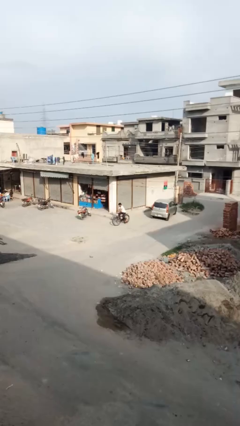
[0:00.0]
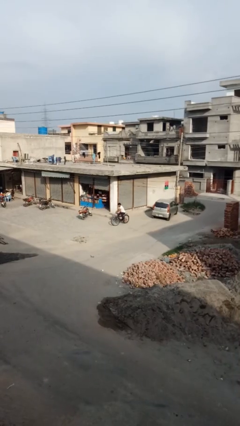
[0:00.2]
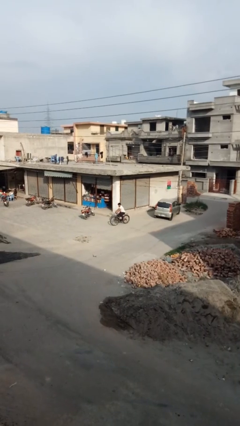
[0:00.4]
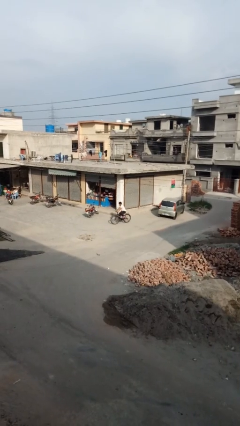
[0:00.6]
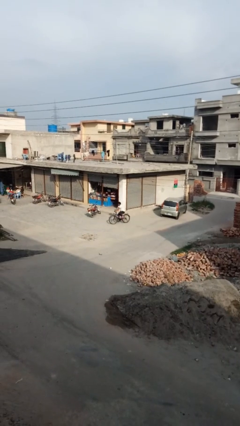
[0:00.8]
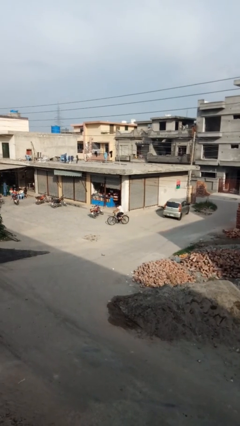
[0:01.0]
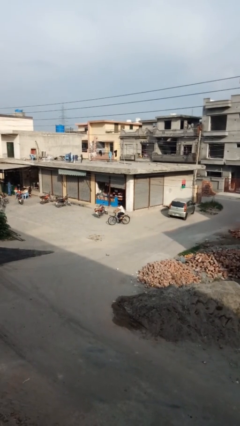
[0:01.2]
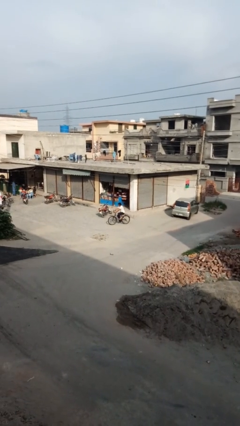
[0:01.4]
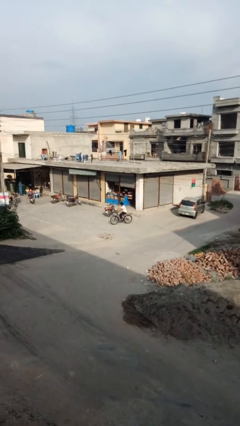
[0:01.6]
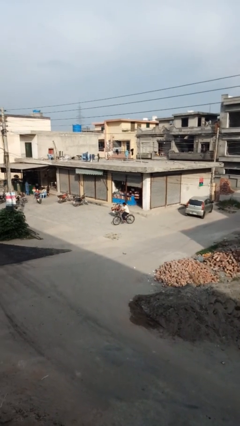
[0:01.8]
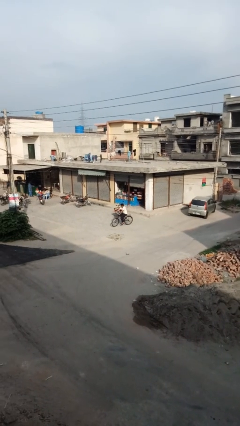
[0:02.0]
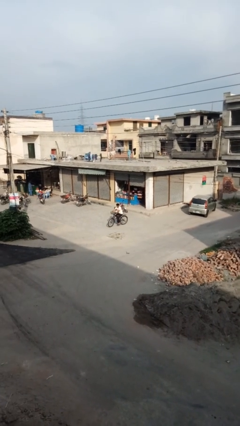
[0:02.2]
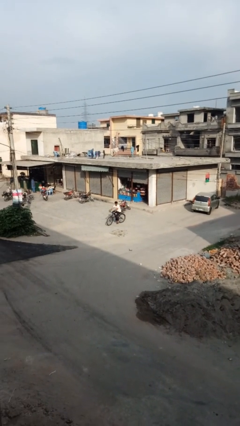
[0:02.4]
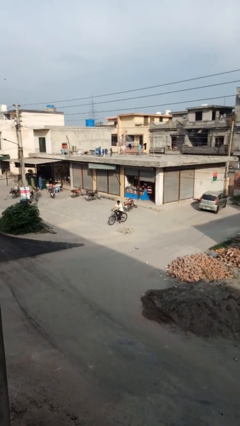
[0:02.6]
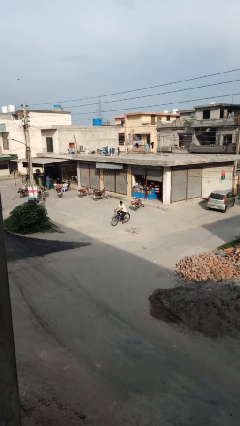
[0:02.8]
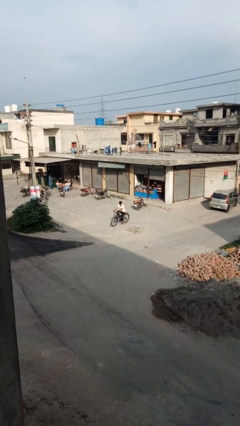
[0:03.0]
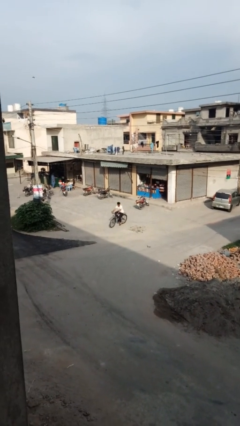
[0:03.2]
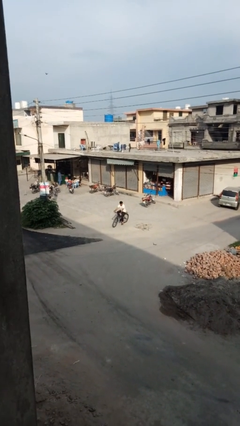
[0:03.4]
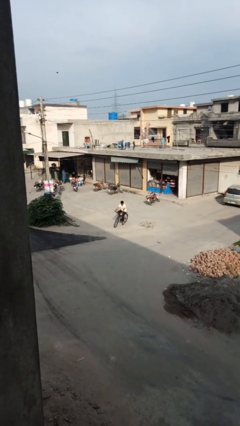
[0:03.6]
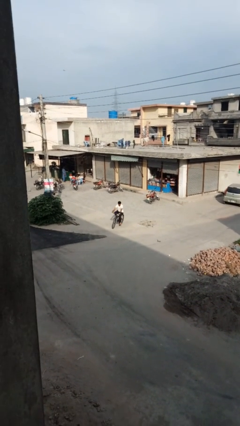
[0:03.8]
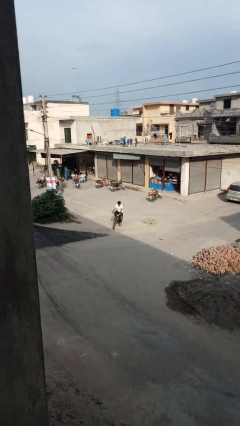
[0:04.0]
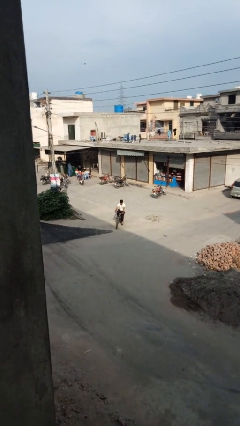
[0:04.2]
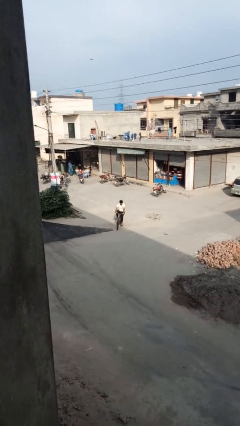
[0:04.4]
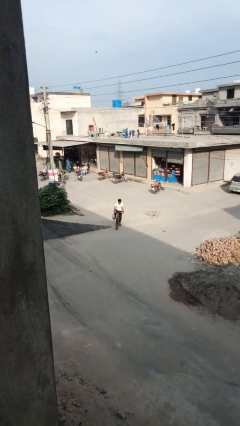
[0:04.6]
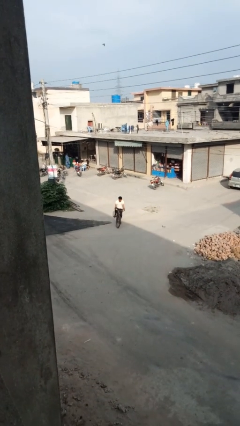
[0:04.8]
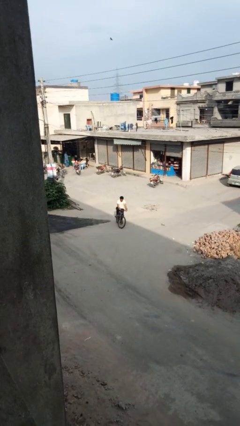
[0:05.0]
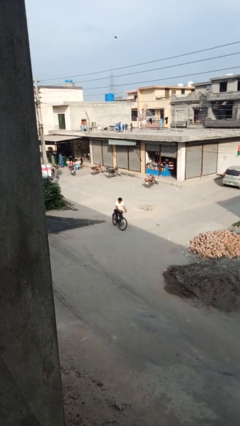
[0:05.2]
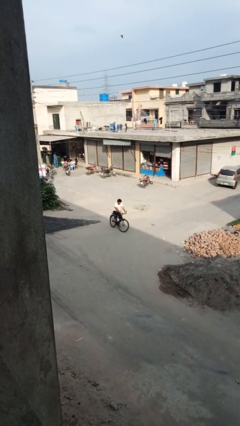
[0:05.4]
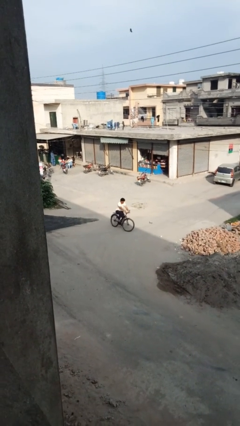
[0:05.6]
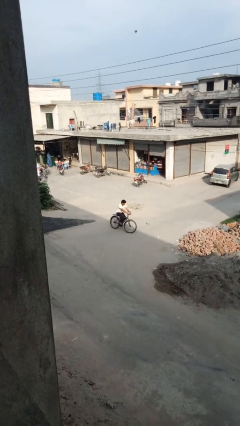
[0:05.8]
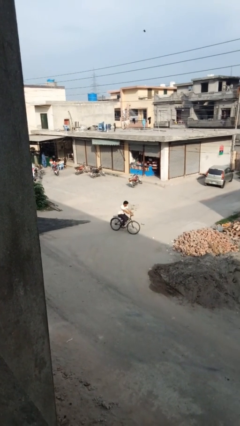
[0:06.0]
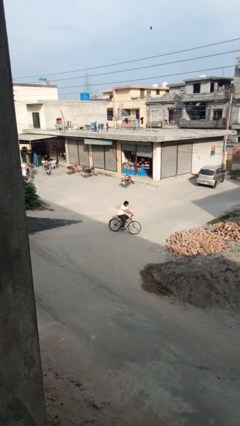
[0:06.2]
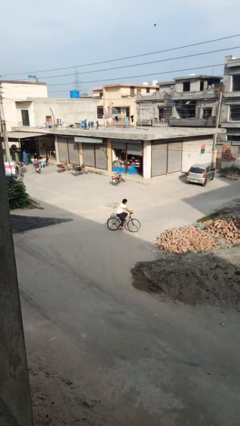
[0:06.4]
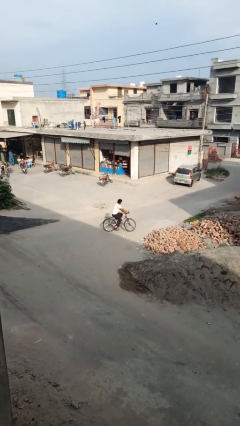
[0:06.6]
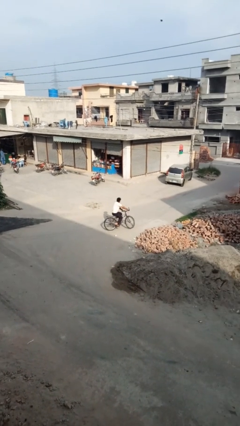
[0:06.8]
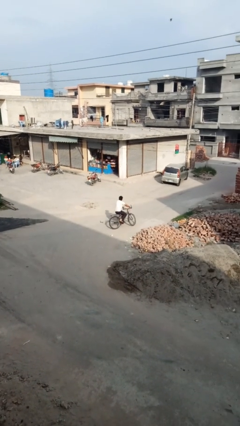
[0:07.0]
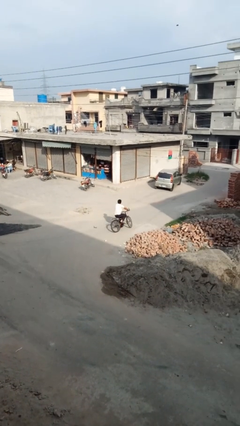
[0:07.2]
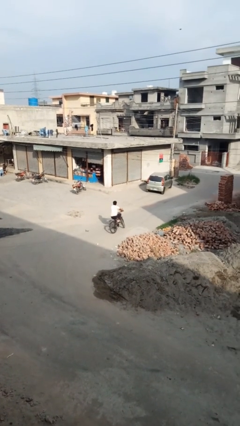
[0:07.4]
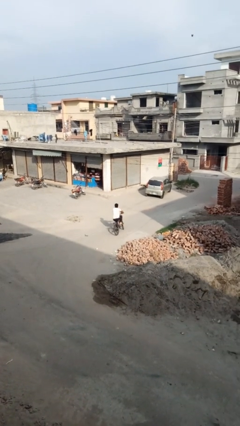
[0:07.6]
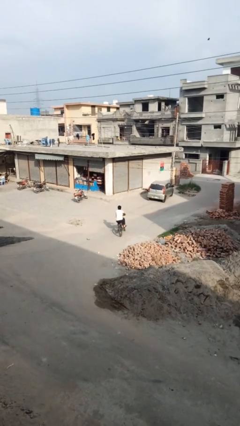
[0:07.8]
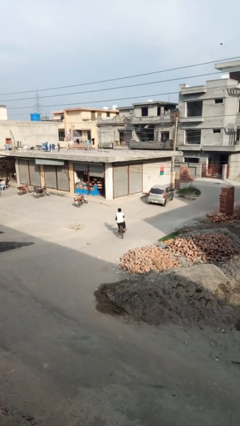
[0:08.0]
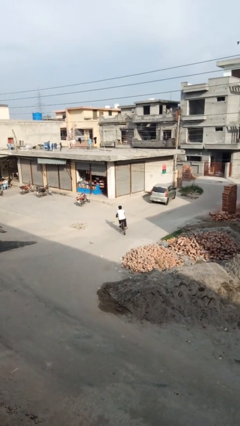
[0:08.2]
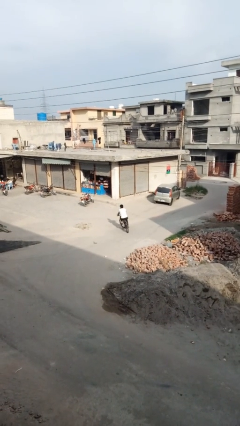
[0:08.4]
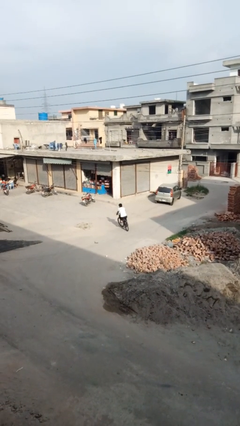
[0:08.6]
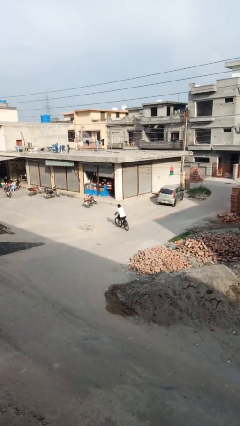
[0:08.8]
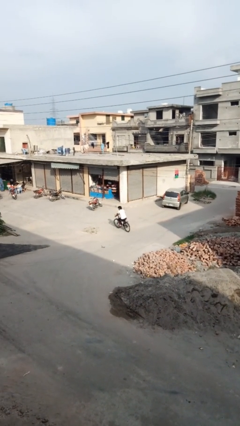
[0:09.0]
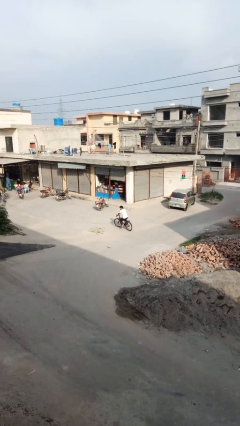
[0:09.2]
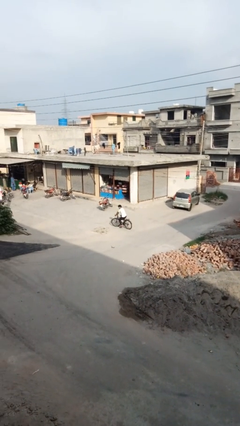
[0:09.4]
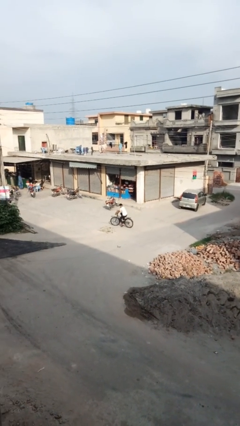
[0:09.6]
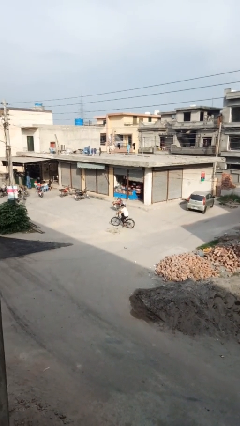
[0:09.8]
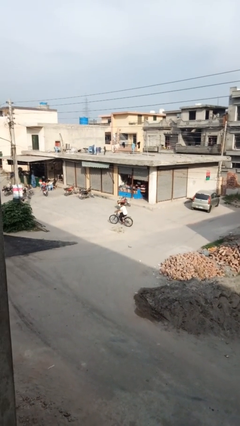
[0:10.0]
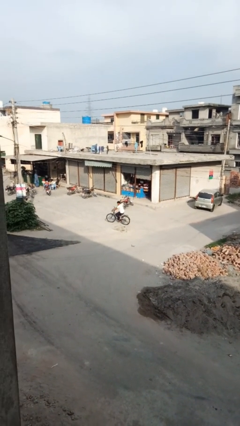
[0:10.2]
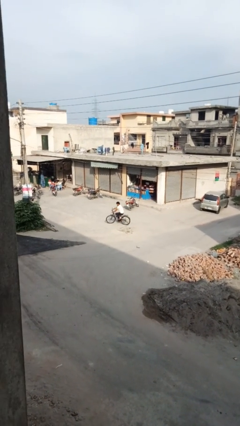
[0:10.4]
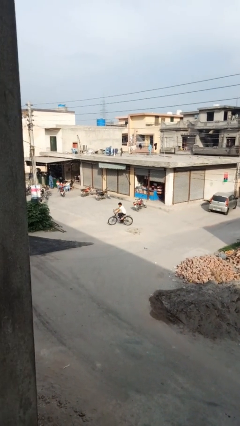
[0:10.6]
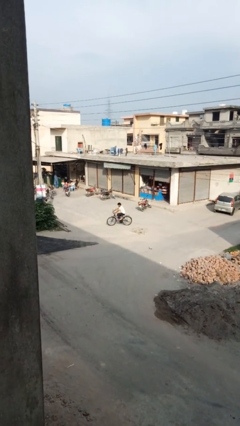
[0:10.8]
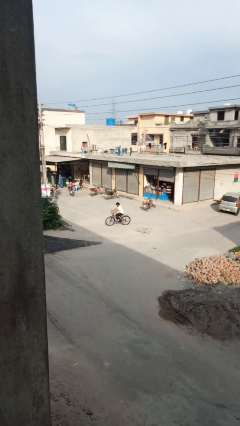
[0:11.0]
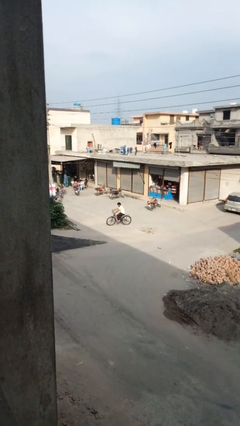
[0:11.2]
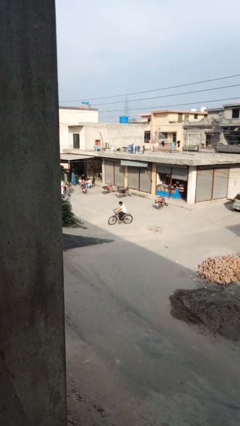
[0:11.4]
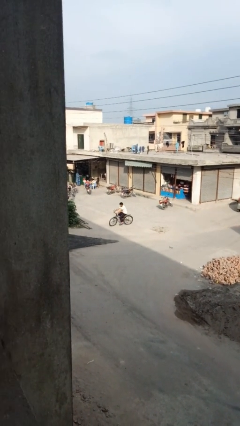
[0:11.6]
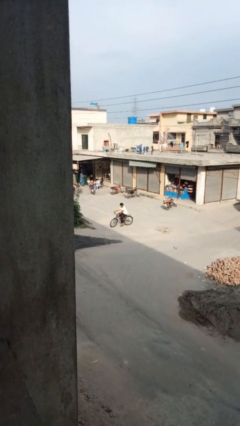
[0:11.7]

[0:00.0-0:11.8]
person rides bicycle

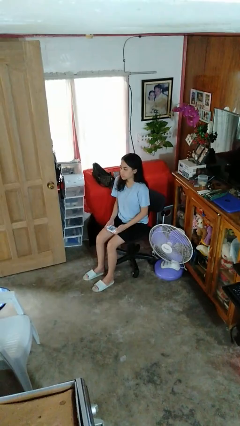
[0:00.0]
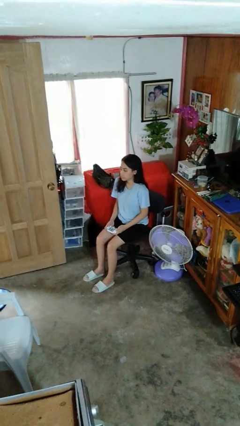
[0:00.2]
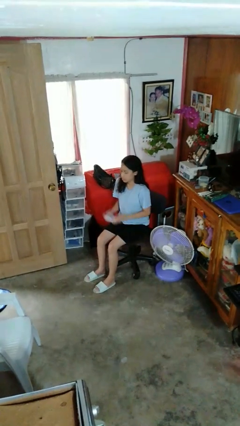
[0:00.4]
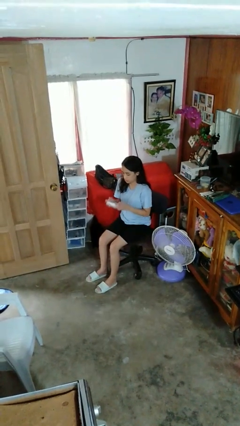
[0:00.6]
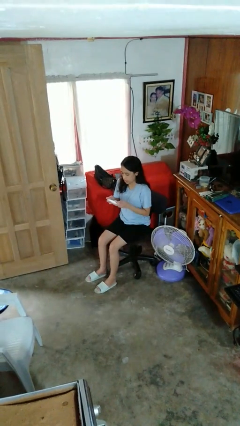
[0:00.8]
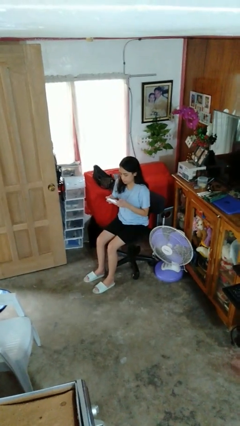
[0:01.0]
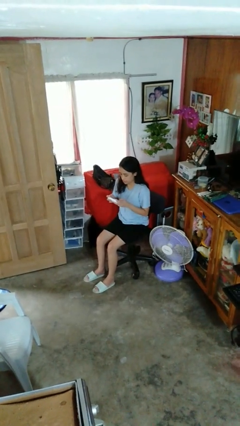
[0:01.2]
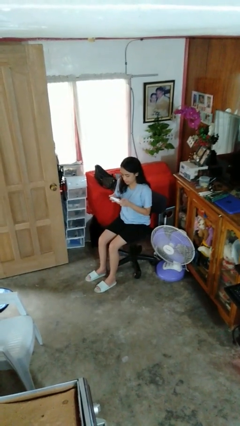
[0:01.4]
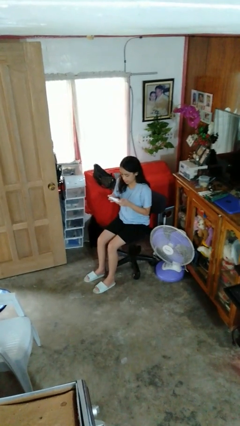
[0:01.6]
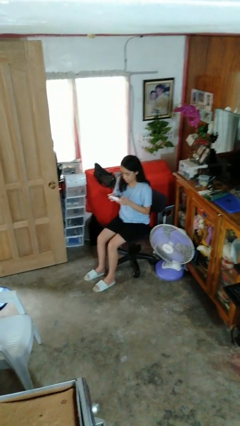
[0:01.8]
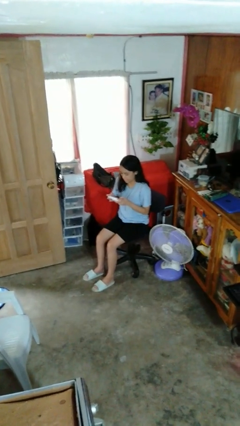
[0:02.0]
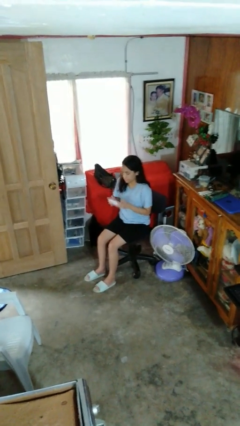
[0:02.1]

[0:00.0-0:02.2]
person interacts with handheld game

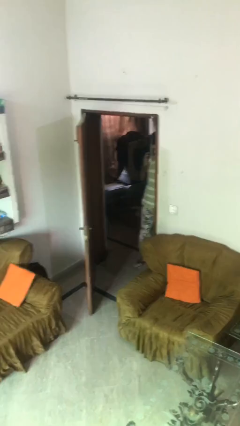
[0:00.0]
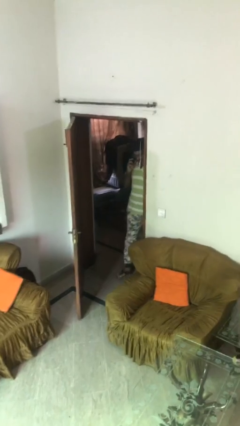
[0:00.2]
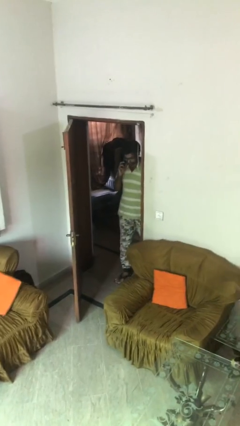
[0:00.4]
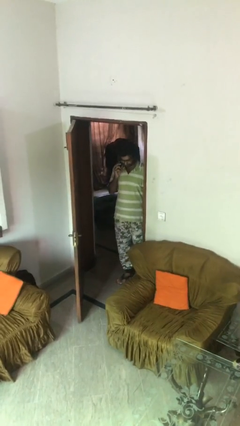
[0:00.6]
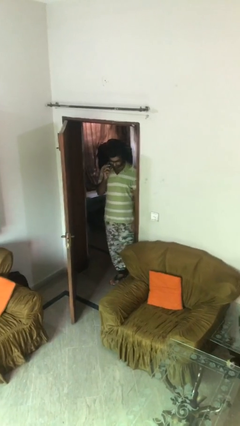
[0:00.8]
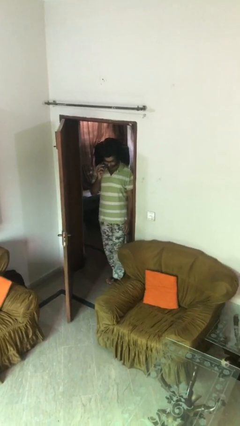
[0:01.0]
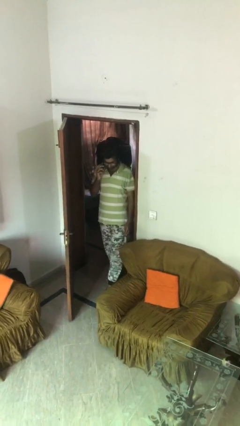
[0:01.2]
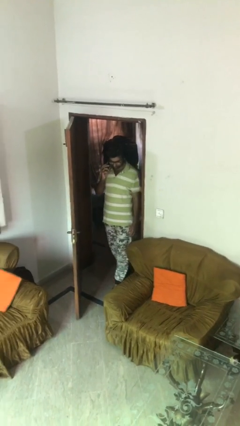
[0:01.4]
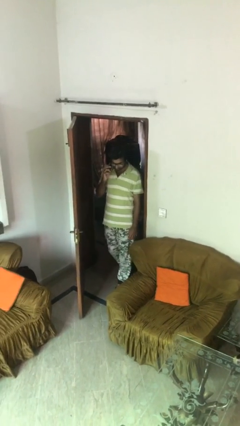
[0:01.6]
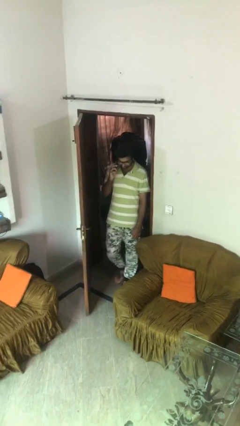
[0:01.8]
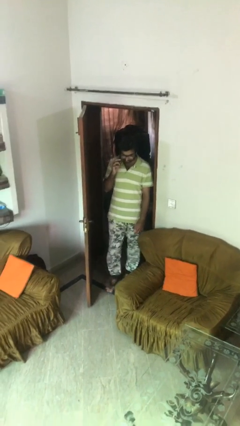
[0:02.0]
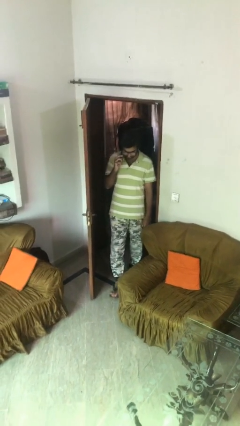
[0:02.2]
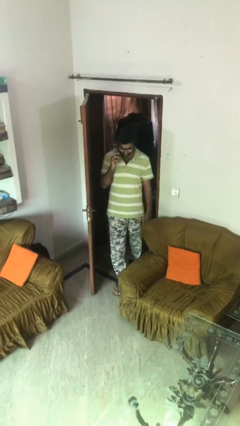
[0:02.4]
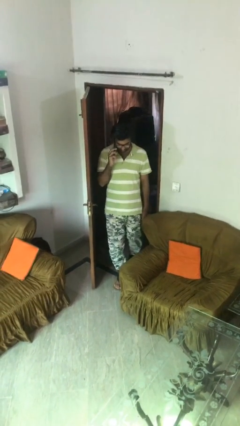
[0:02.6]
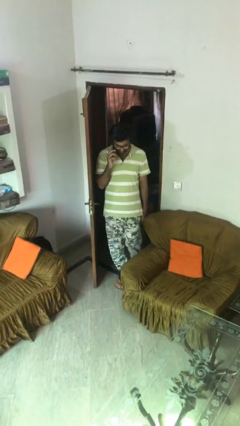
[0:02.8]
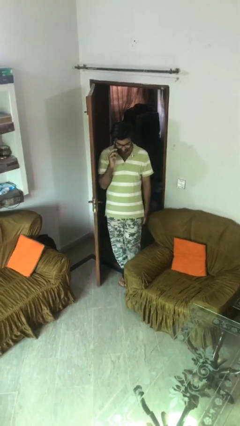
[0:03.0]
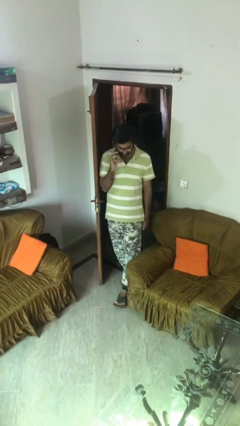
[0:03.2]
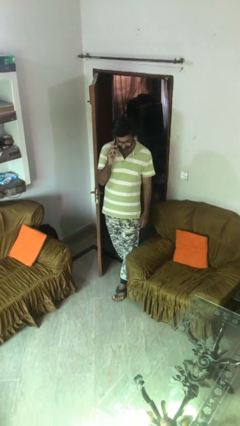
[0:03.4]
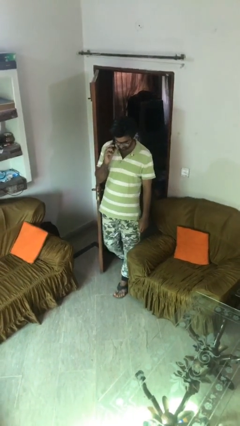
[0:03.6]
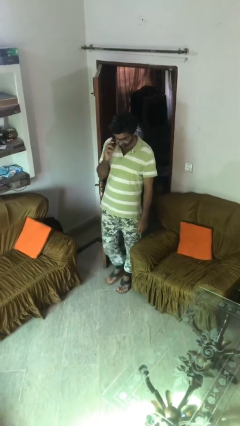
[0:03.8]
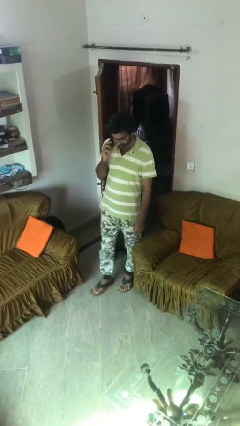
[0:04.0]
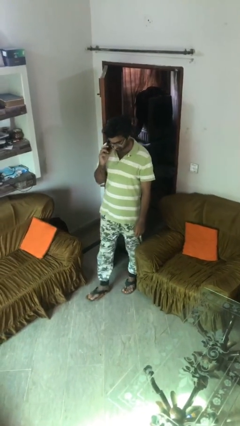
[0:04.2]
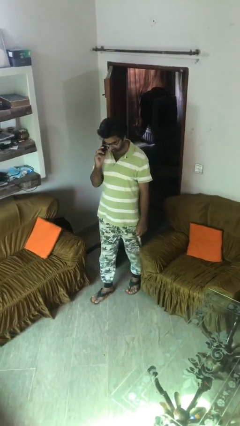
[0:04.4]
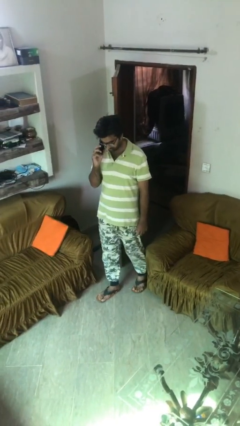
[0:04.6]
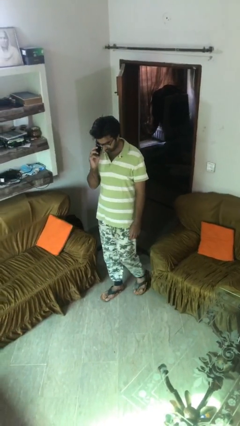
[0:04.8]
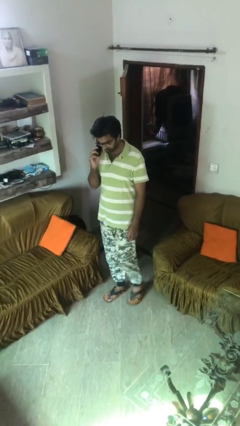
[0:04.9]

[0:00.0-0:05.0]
person enters scene through structure
